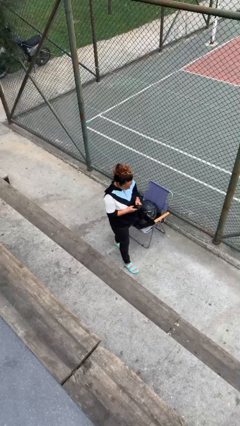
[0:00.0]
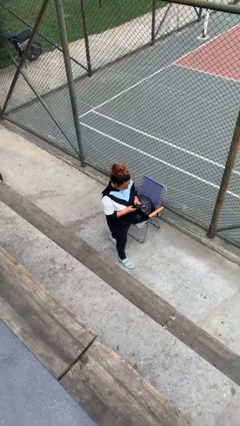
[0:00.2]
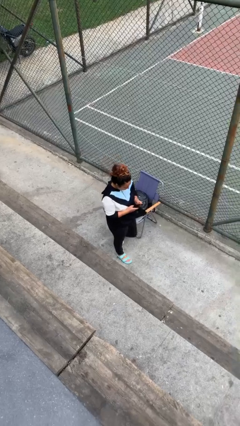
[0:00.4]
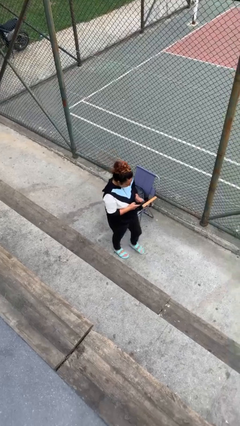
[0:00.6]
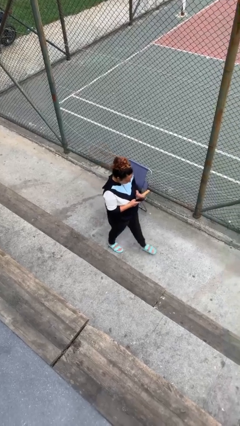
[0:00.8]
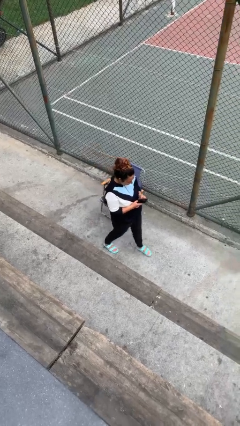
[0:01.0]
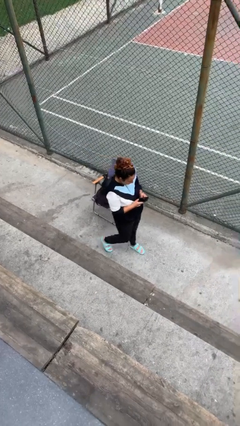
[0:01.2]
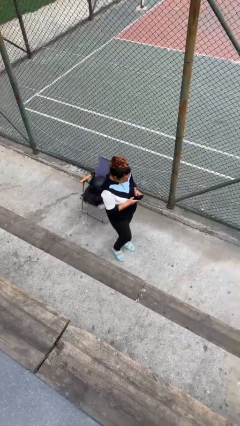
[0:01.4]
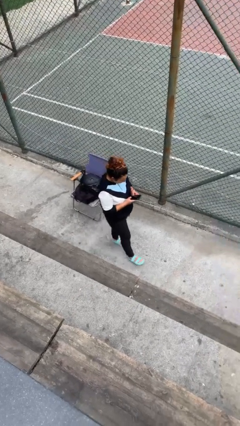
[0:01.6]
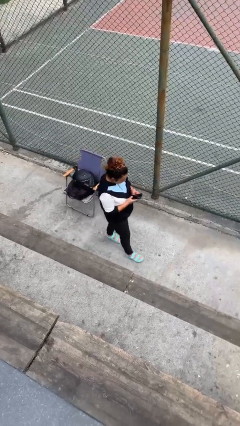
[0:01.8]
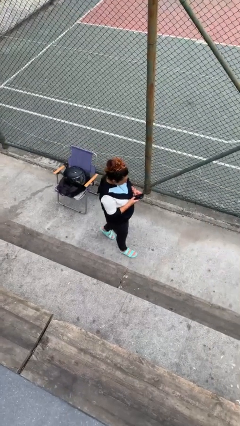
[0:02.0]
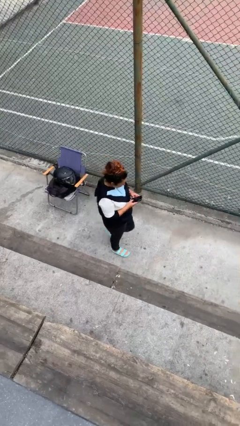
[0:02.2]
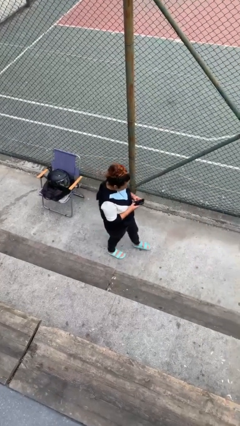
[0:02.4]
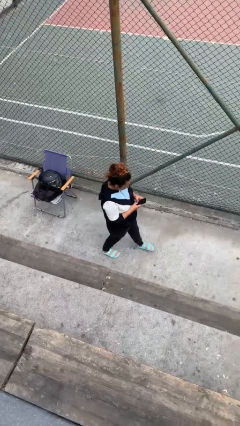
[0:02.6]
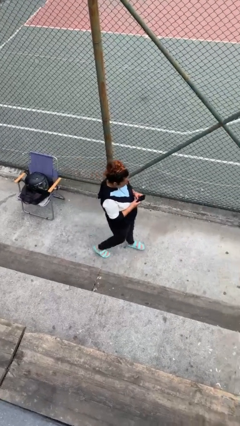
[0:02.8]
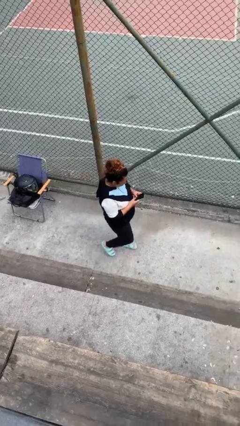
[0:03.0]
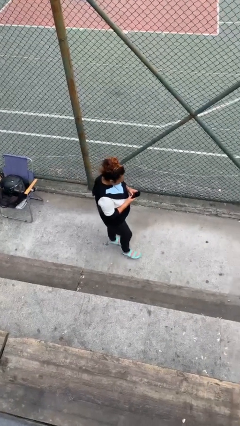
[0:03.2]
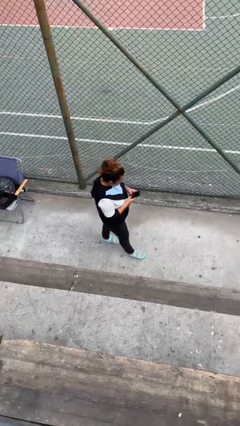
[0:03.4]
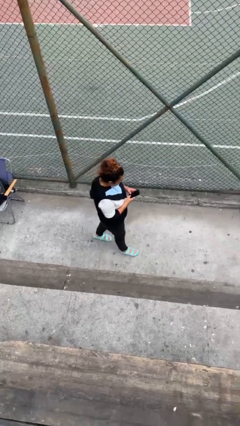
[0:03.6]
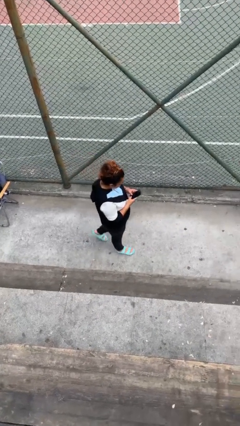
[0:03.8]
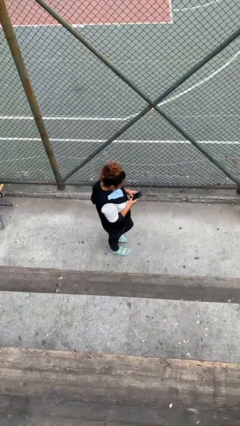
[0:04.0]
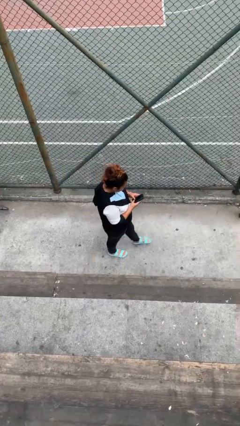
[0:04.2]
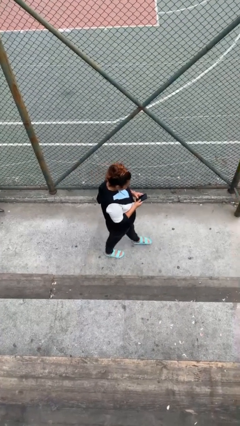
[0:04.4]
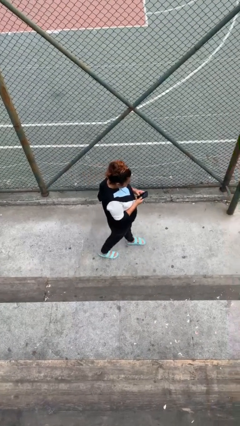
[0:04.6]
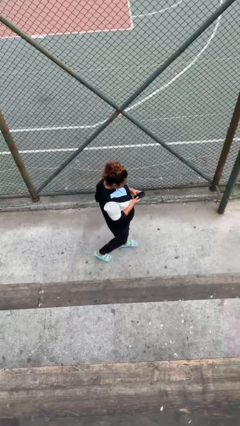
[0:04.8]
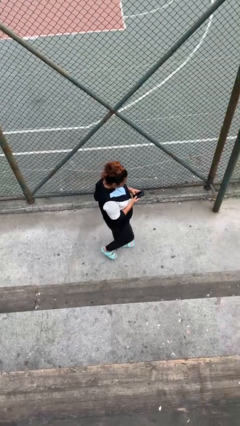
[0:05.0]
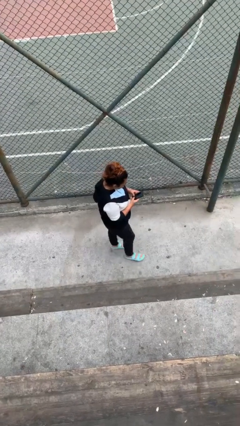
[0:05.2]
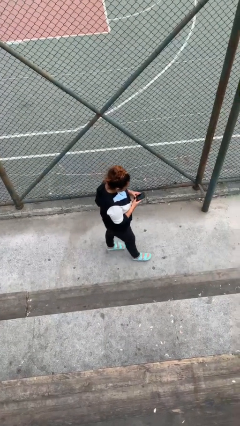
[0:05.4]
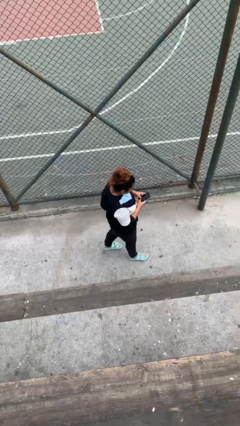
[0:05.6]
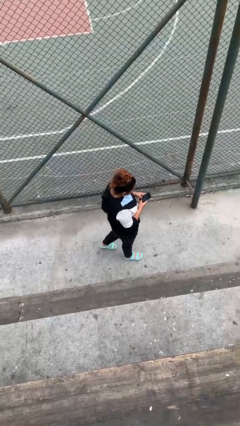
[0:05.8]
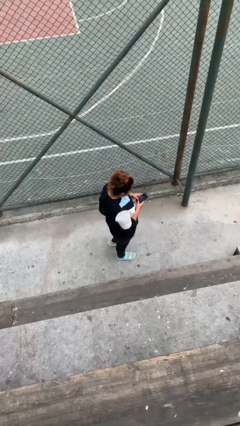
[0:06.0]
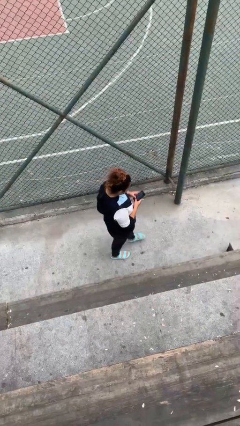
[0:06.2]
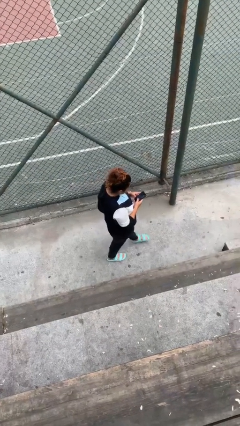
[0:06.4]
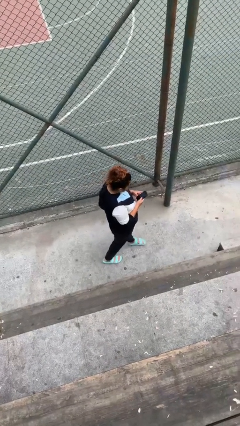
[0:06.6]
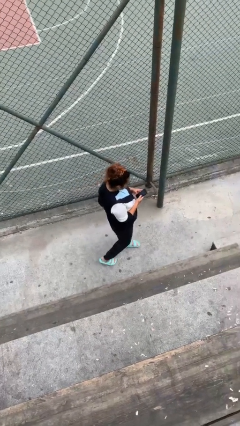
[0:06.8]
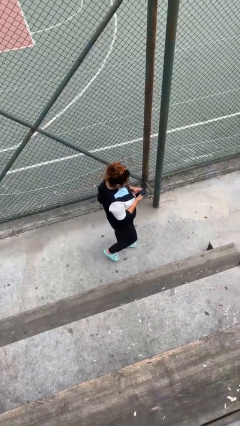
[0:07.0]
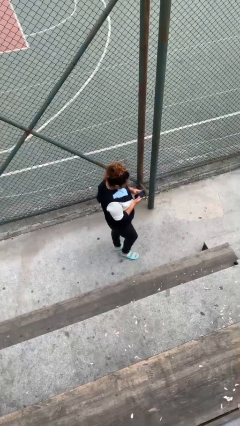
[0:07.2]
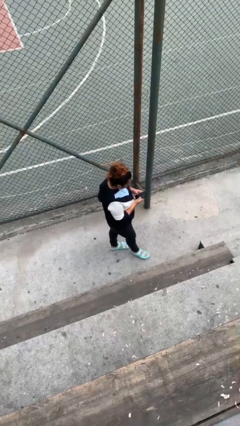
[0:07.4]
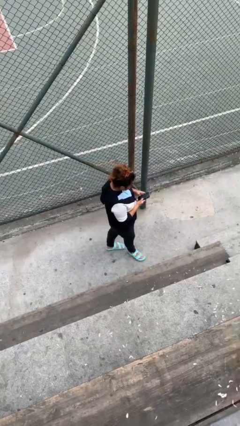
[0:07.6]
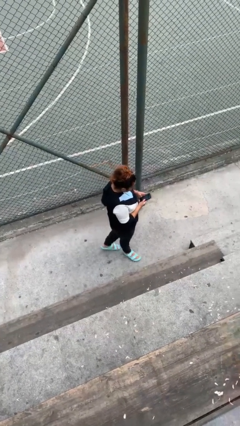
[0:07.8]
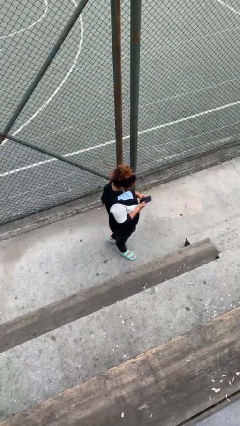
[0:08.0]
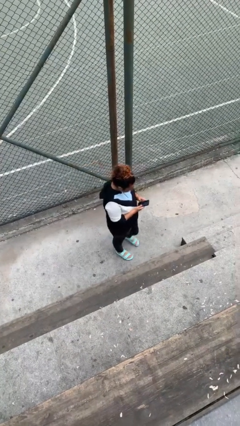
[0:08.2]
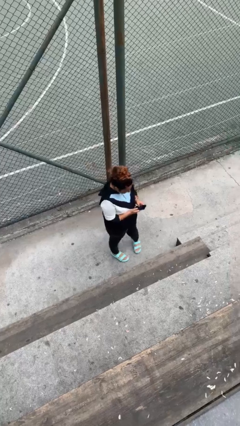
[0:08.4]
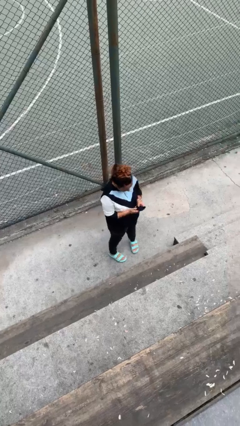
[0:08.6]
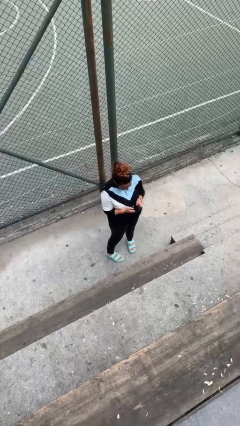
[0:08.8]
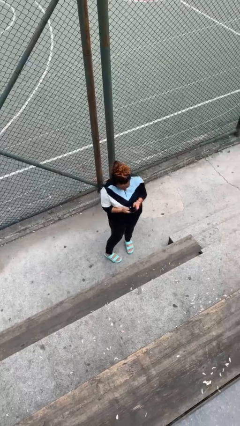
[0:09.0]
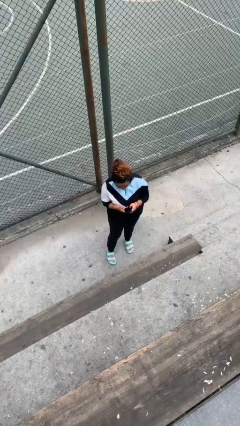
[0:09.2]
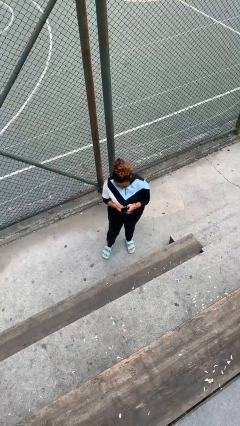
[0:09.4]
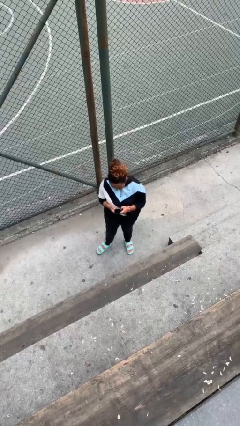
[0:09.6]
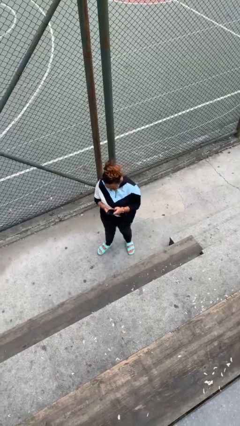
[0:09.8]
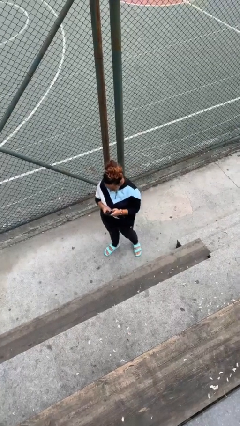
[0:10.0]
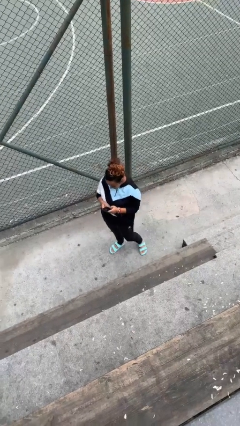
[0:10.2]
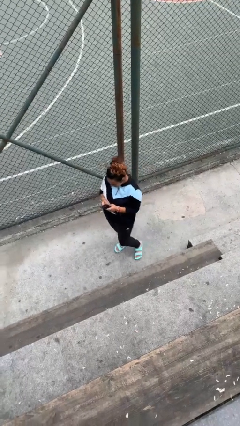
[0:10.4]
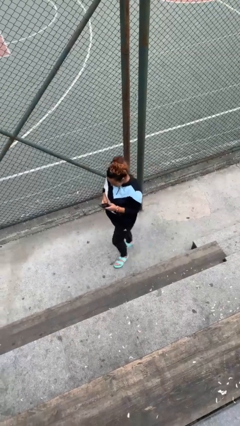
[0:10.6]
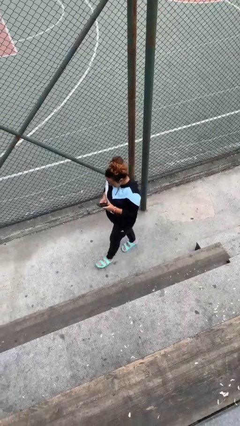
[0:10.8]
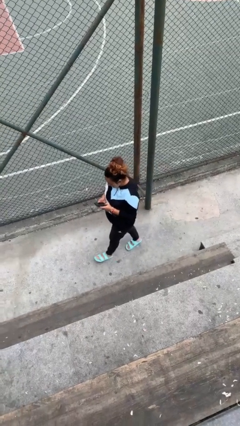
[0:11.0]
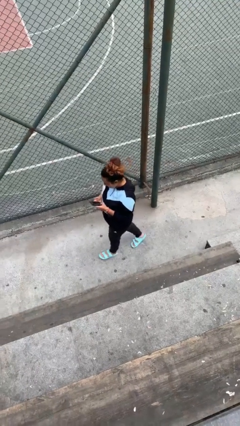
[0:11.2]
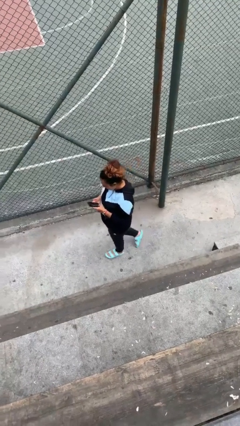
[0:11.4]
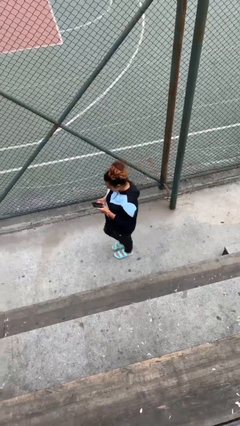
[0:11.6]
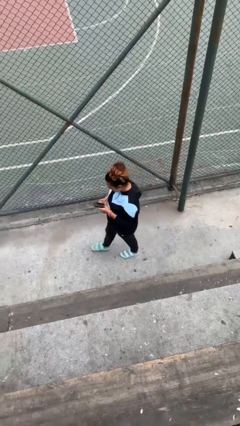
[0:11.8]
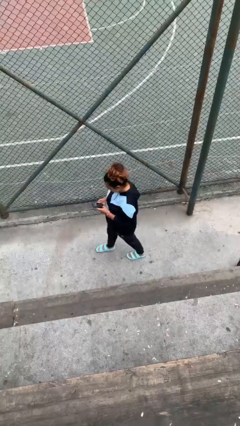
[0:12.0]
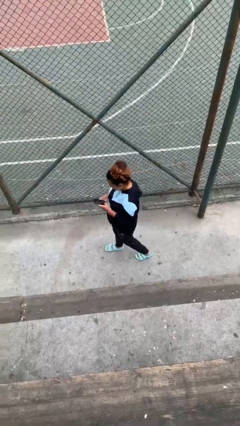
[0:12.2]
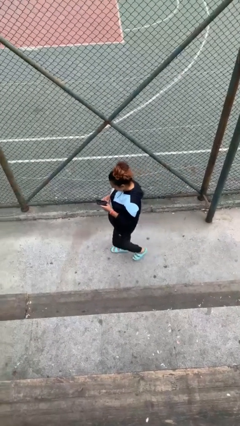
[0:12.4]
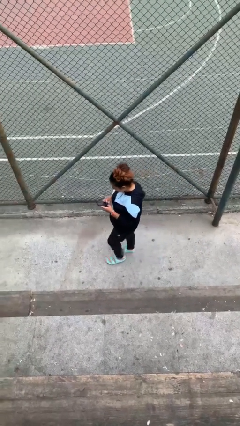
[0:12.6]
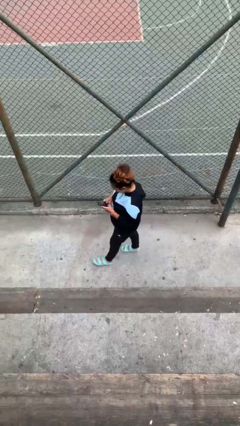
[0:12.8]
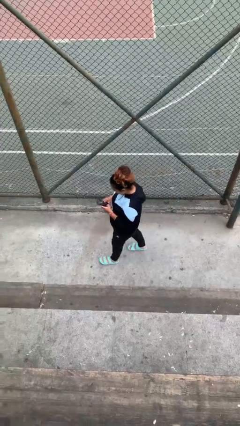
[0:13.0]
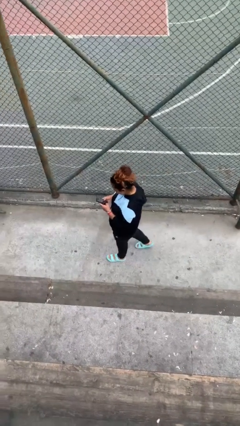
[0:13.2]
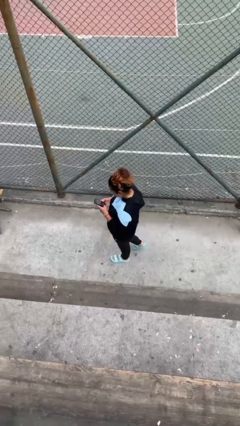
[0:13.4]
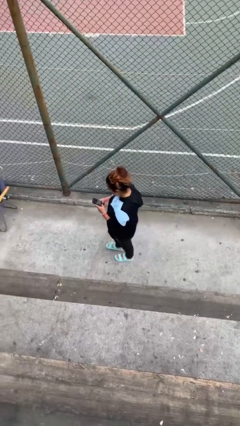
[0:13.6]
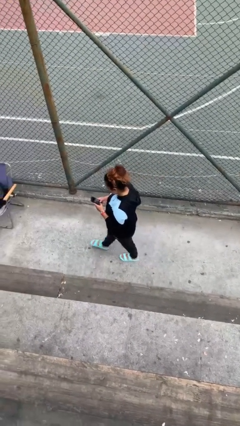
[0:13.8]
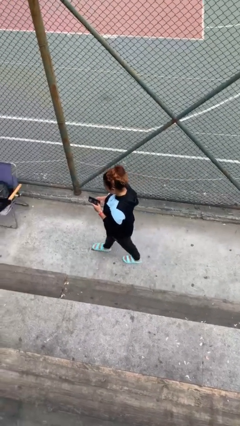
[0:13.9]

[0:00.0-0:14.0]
person texts on phone

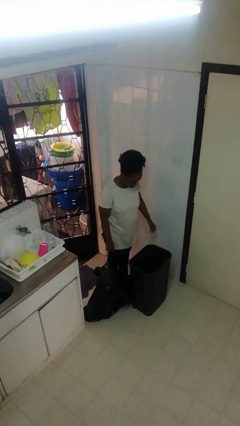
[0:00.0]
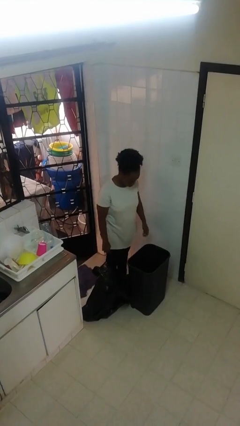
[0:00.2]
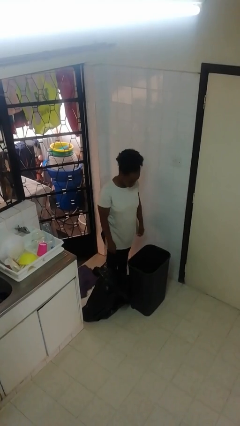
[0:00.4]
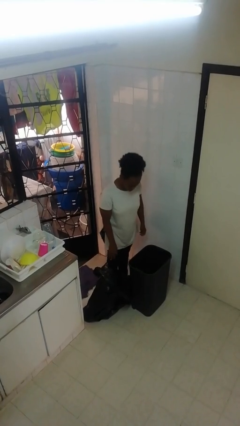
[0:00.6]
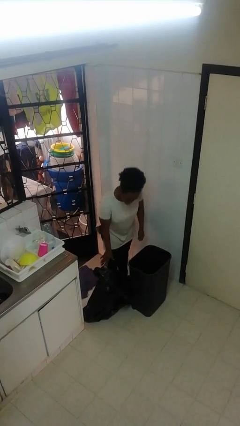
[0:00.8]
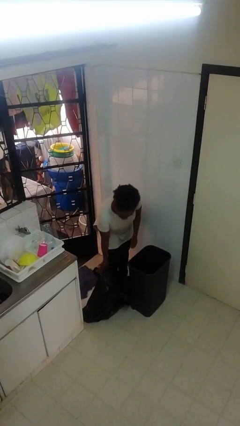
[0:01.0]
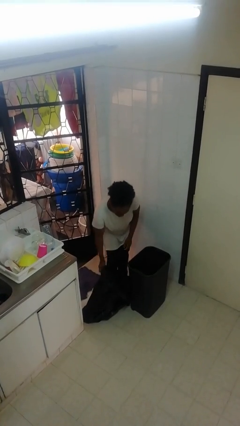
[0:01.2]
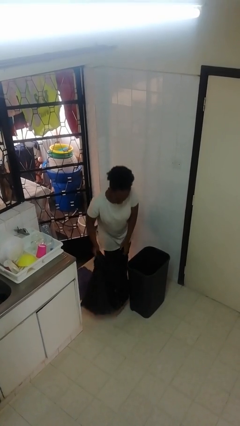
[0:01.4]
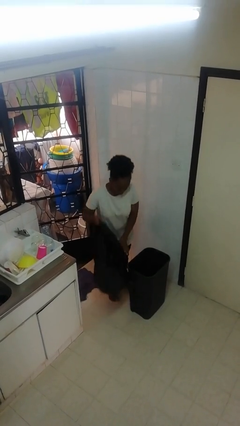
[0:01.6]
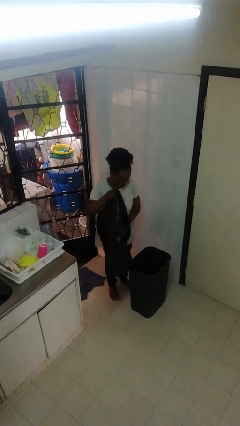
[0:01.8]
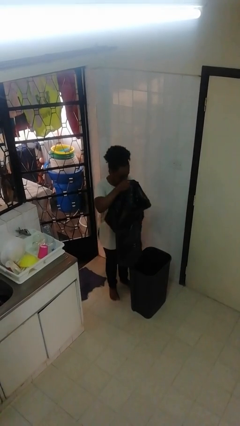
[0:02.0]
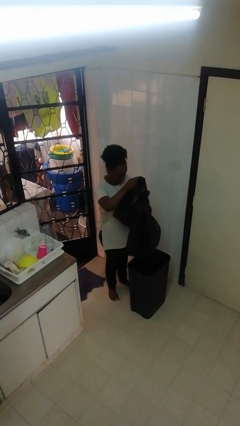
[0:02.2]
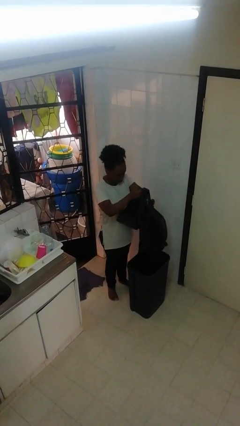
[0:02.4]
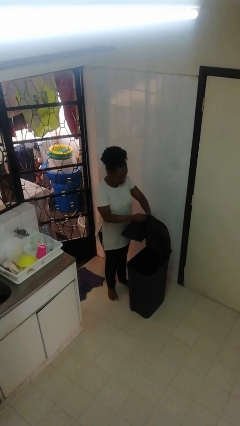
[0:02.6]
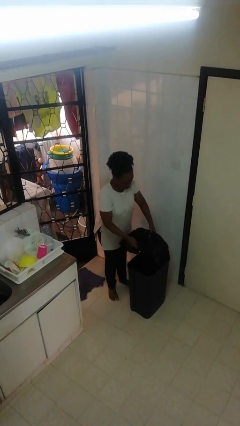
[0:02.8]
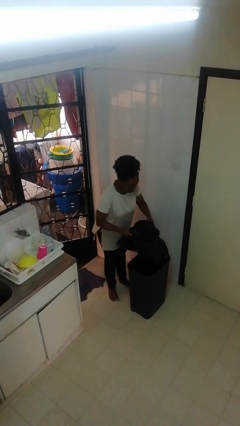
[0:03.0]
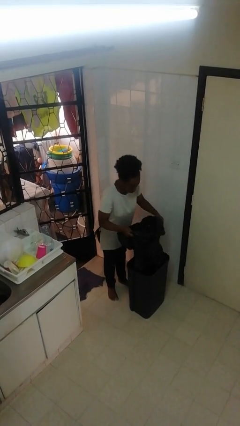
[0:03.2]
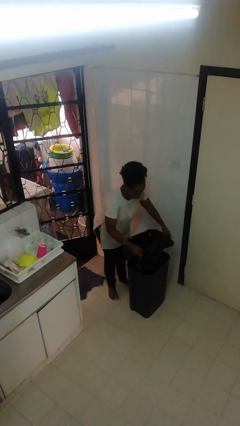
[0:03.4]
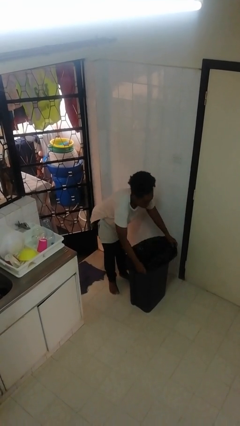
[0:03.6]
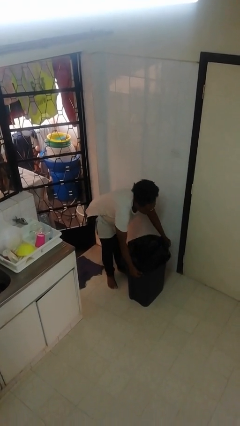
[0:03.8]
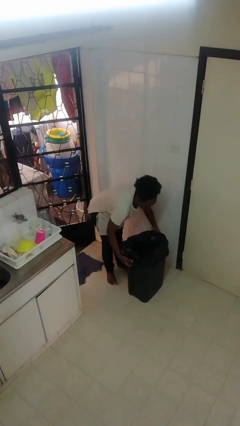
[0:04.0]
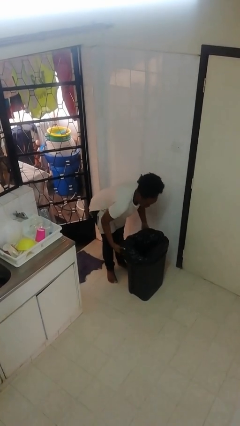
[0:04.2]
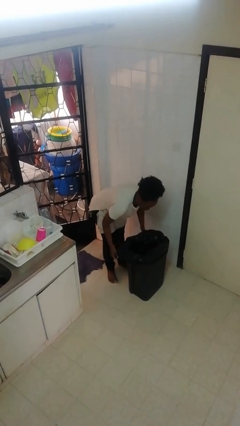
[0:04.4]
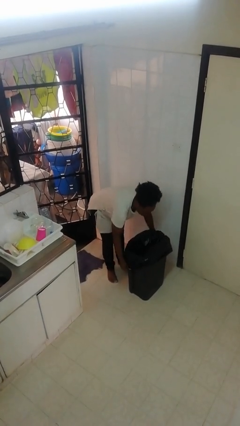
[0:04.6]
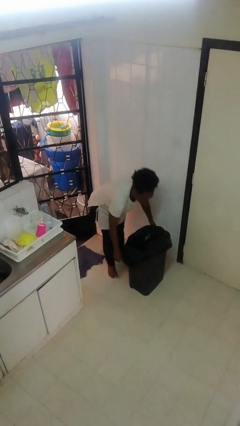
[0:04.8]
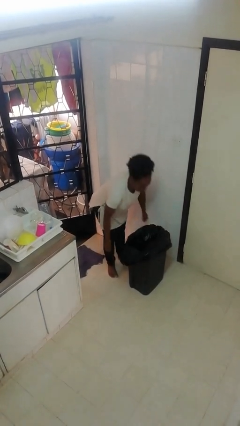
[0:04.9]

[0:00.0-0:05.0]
person inserts trashbag into trashcan
